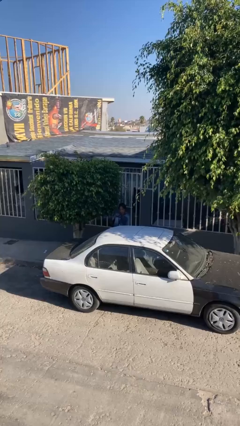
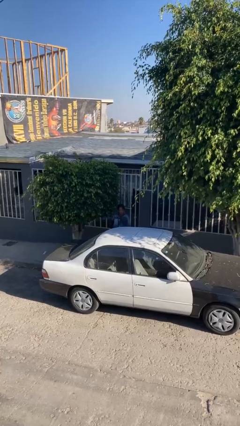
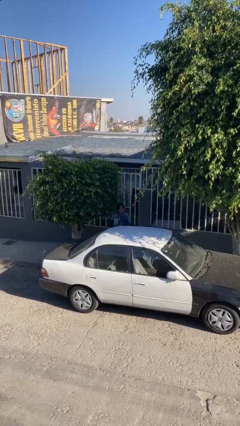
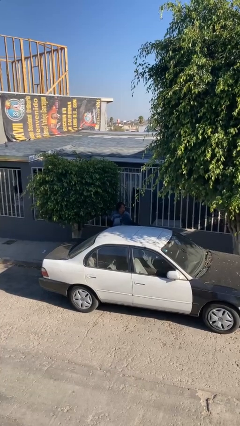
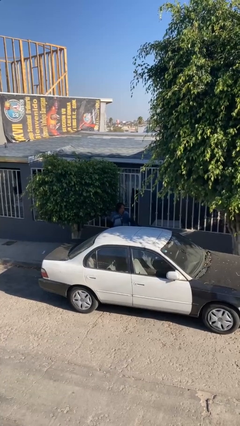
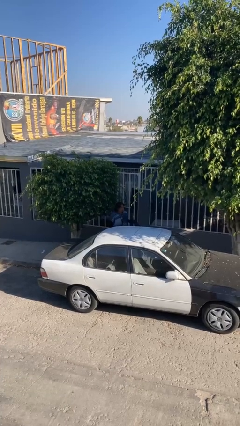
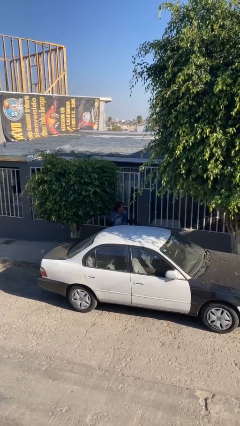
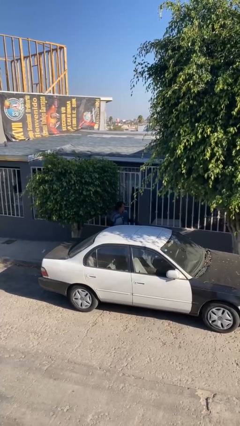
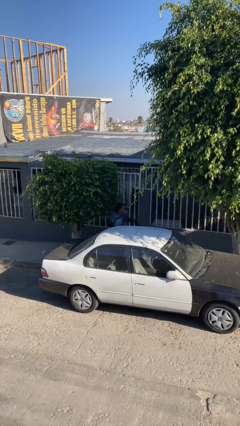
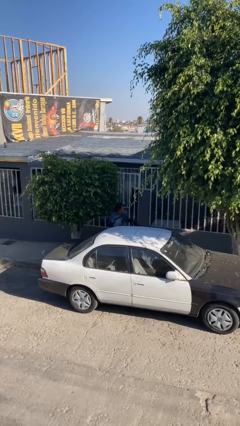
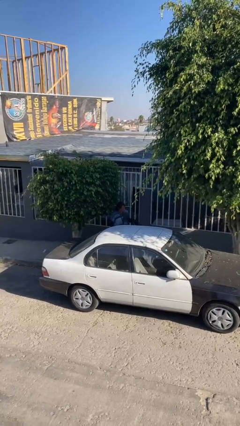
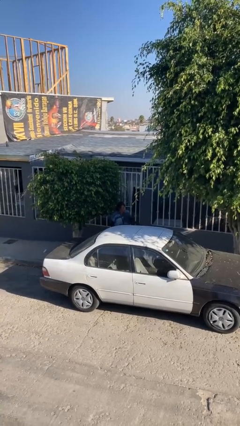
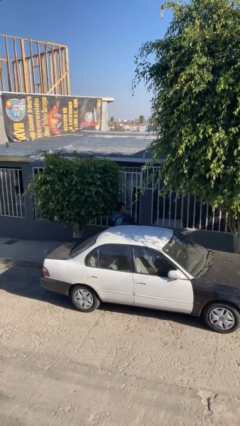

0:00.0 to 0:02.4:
person opens car door

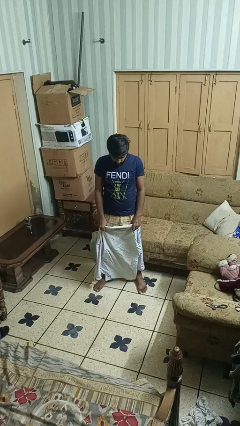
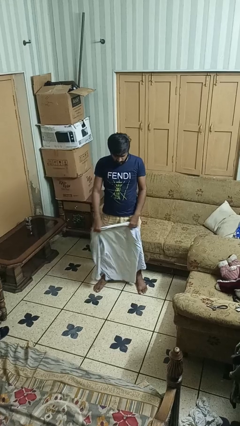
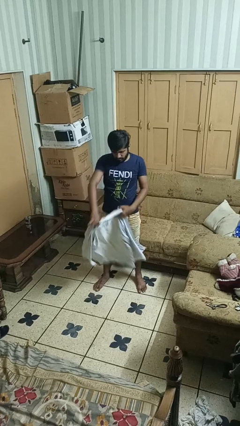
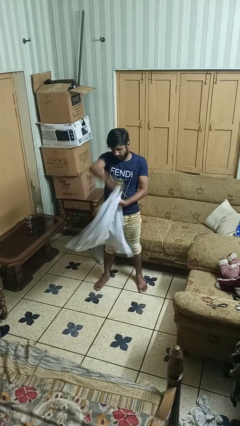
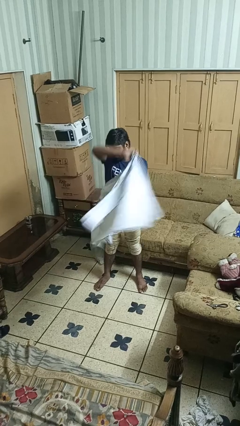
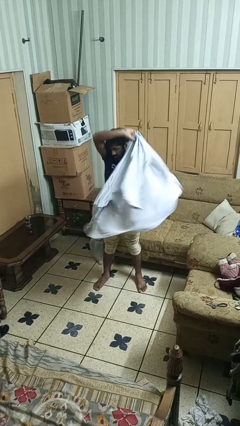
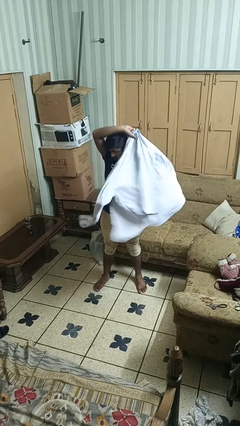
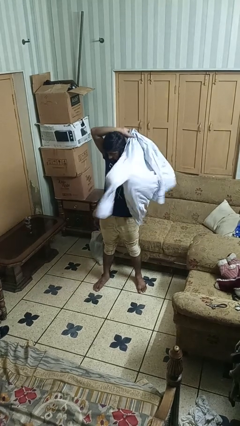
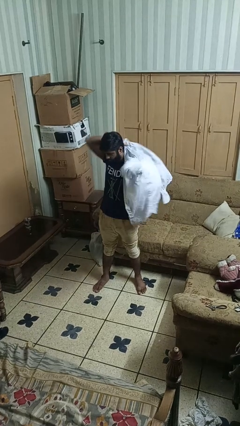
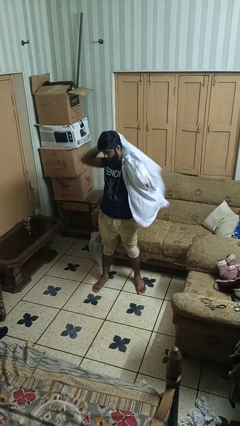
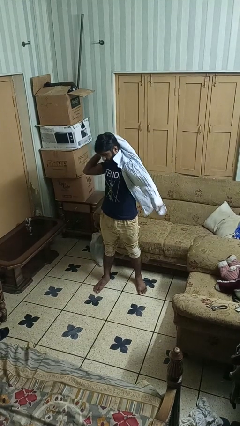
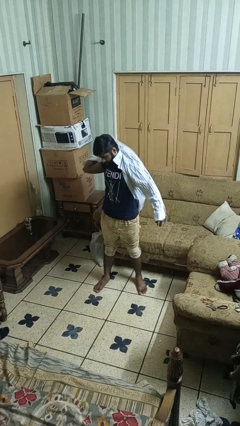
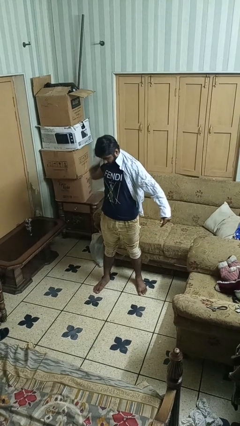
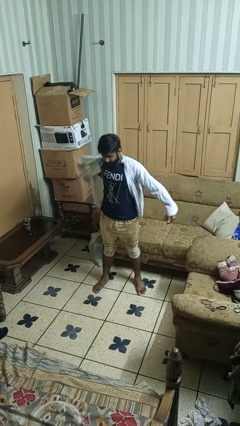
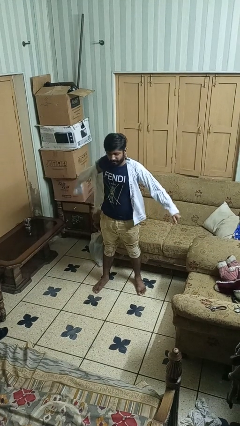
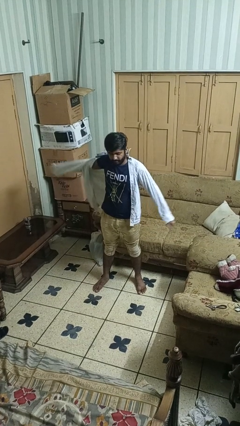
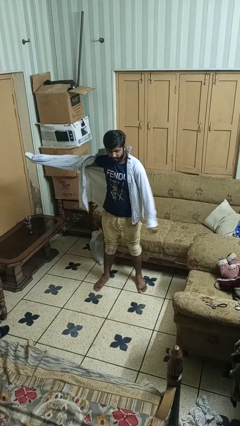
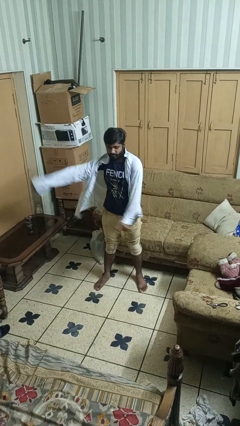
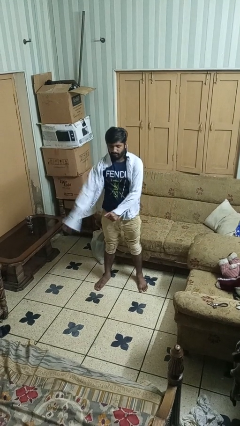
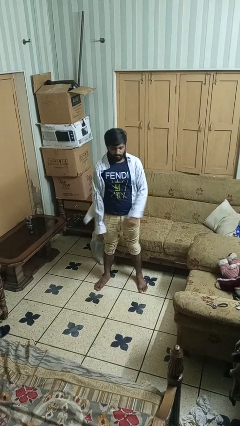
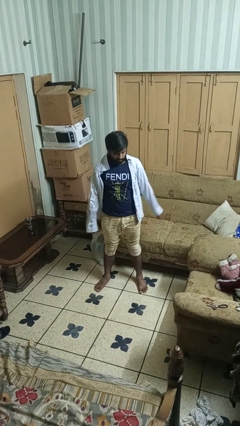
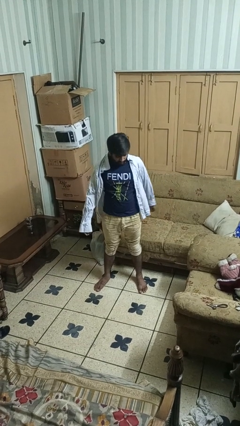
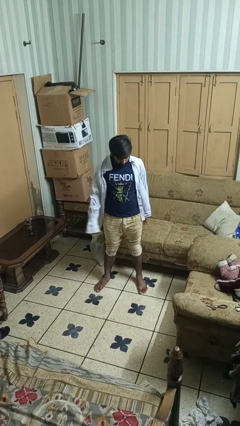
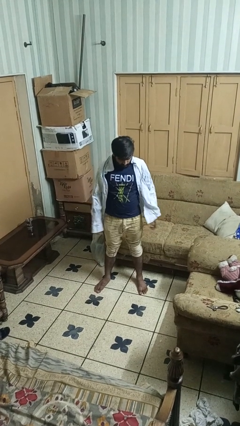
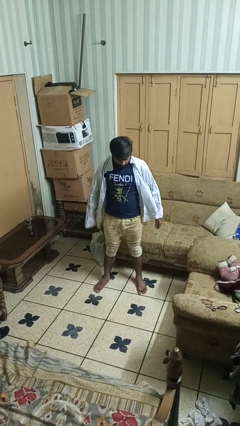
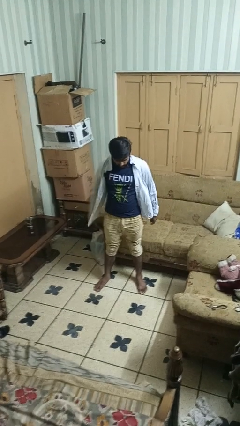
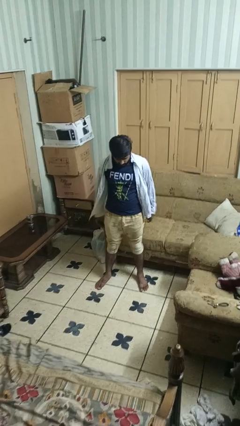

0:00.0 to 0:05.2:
person puts on shirt

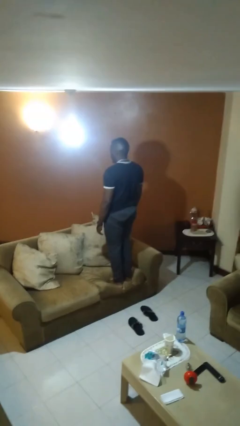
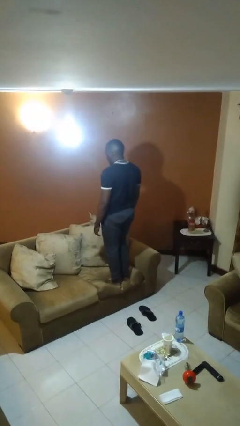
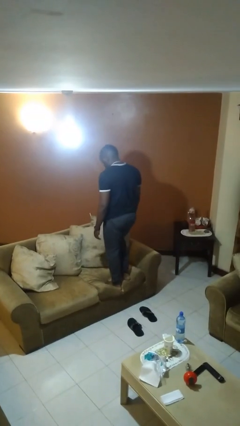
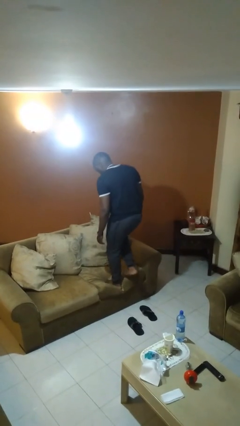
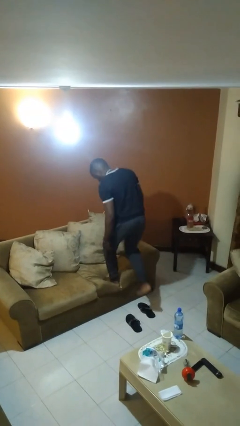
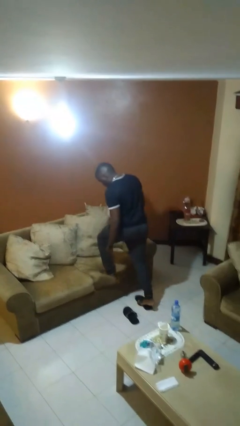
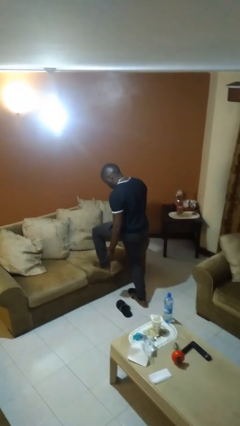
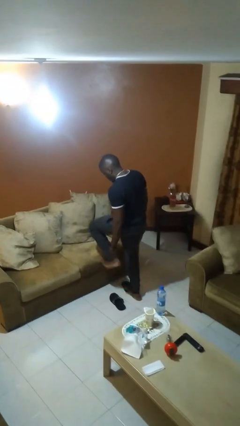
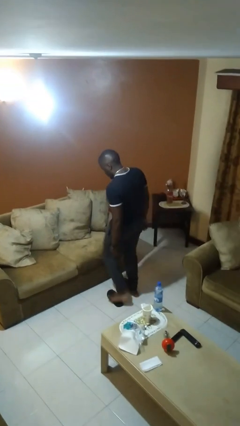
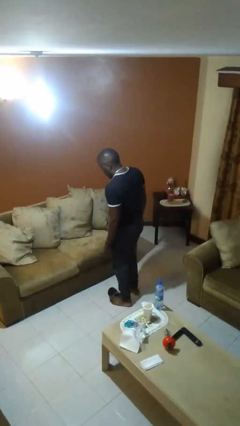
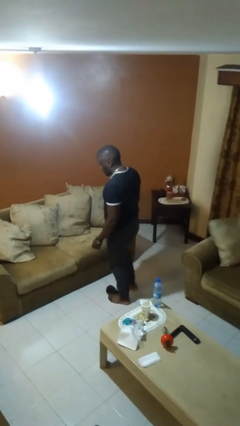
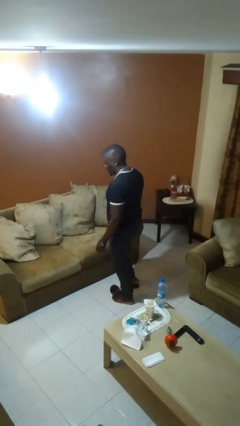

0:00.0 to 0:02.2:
person climbs off chair

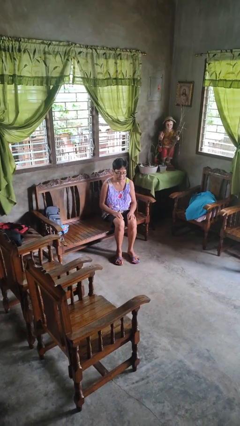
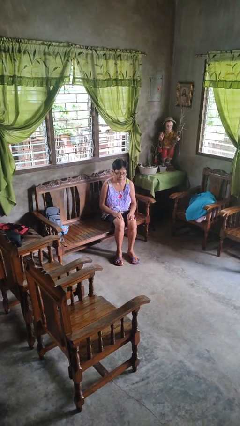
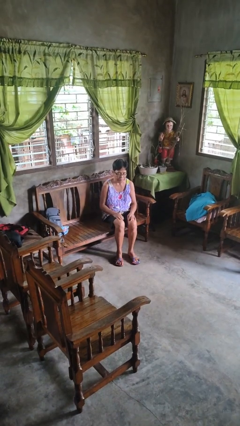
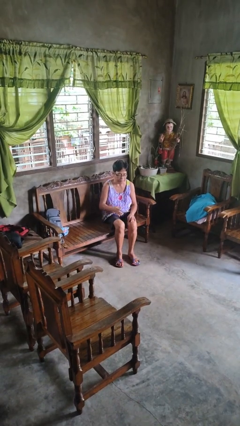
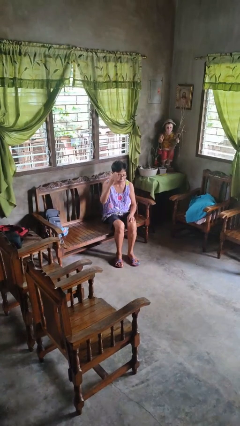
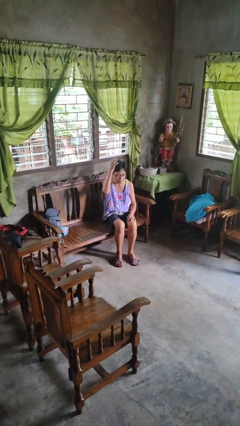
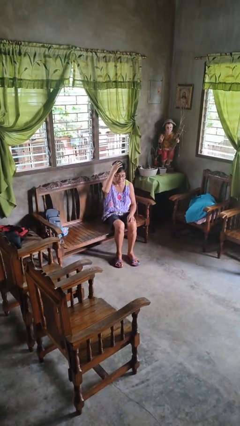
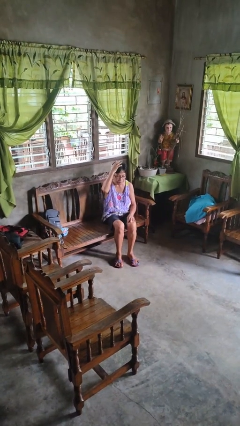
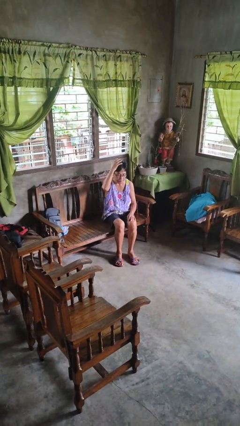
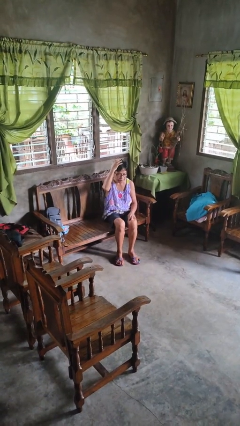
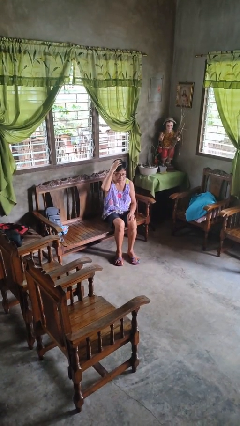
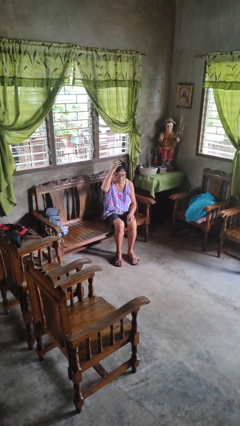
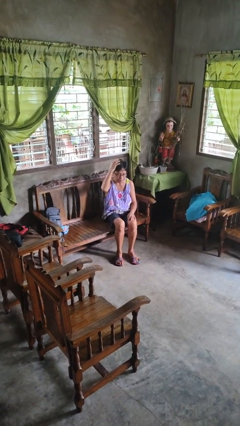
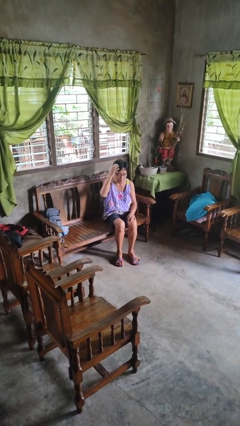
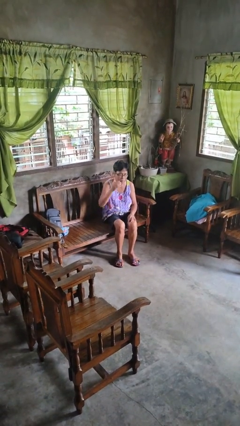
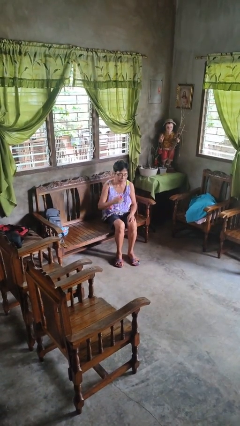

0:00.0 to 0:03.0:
person pats head

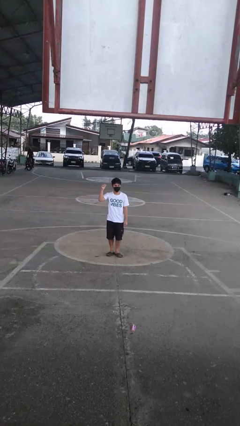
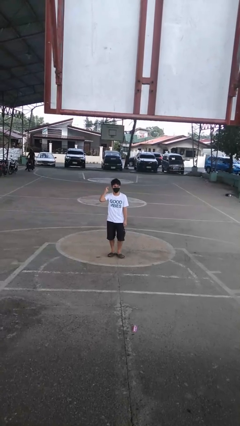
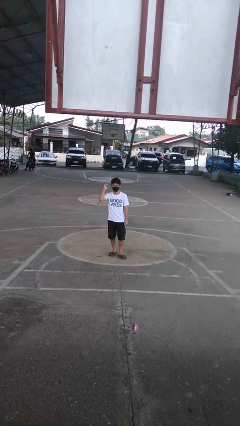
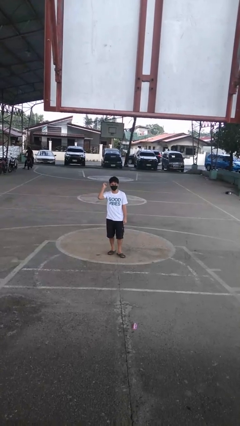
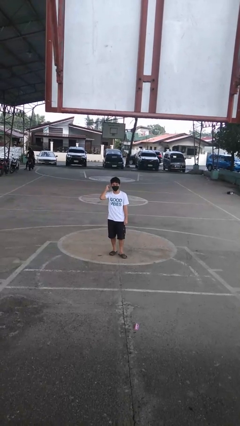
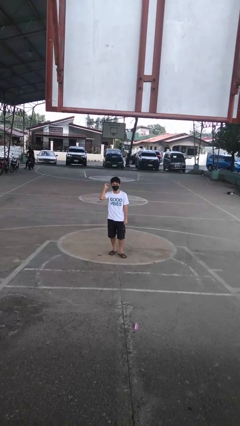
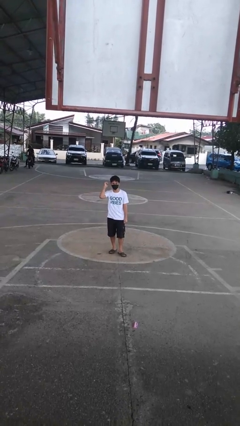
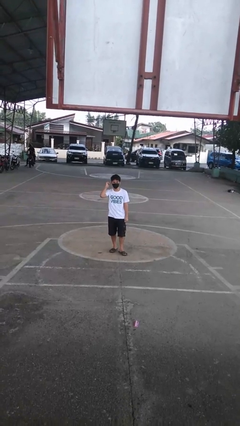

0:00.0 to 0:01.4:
person gestures behind me

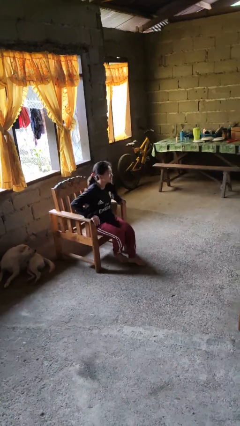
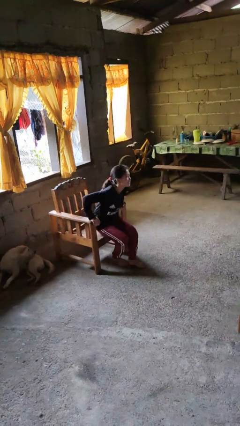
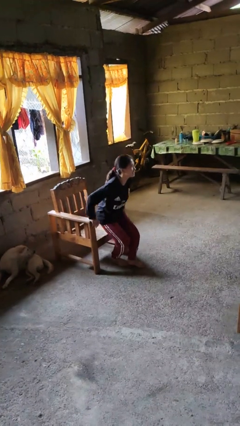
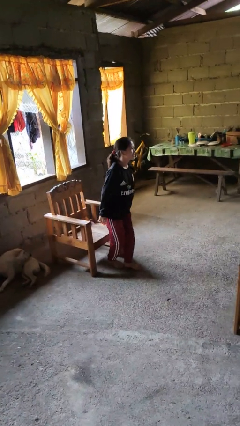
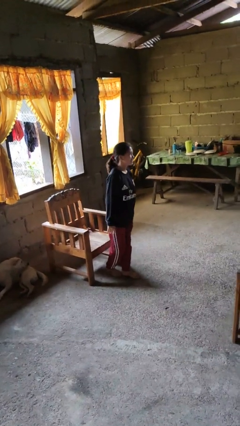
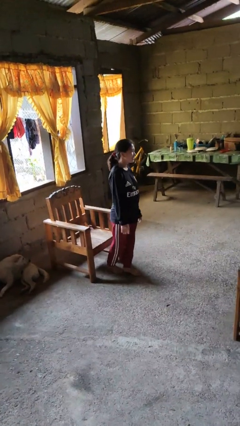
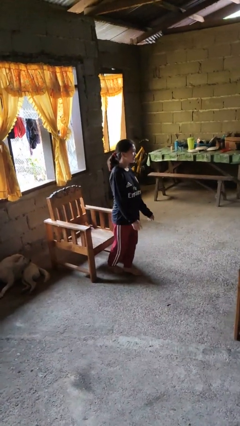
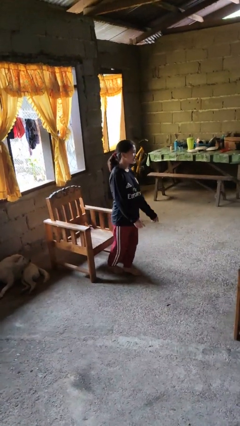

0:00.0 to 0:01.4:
person stands up from floor

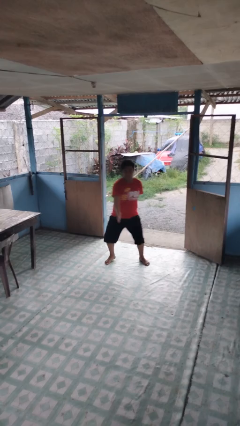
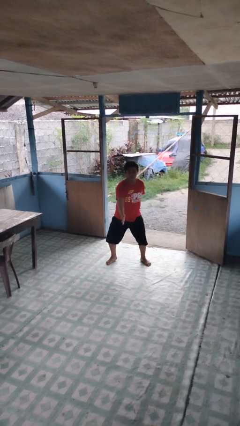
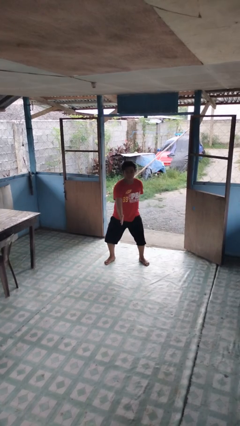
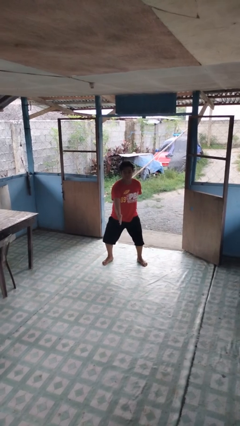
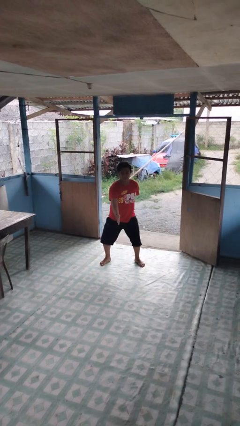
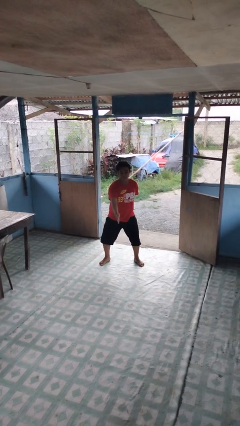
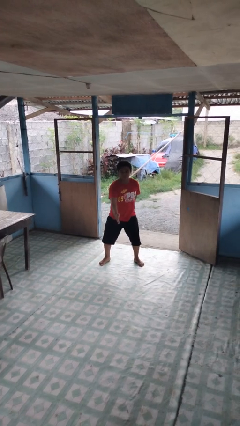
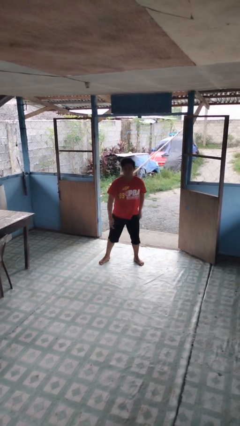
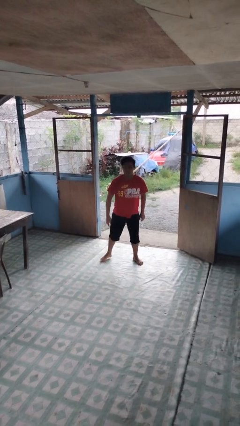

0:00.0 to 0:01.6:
person karate chop
